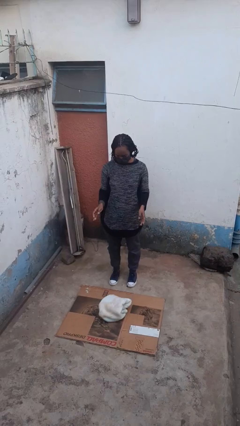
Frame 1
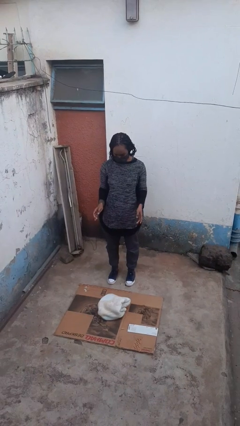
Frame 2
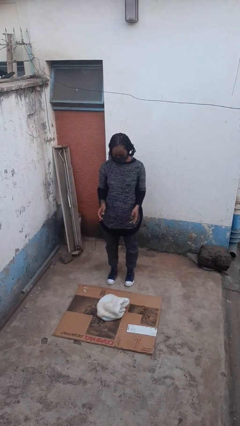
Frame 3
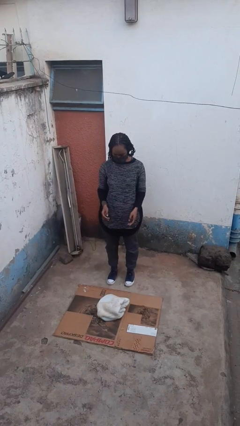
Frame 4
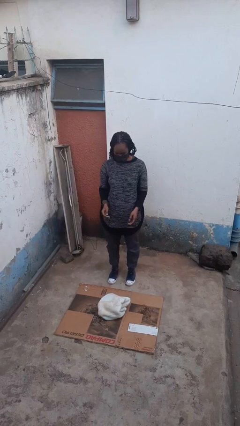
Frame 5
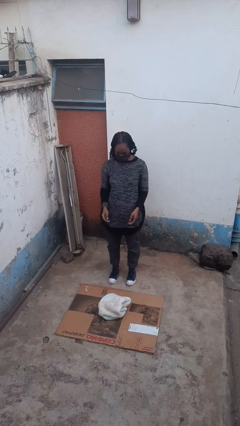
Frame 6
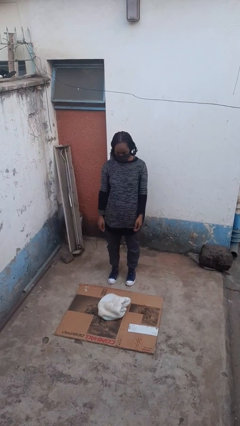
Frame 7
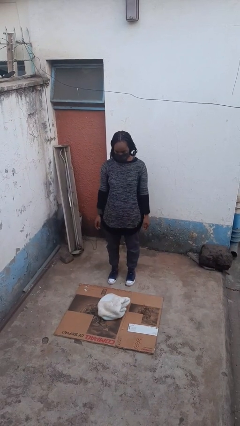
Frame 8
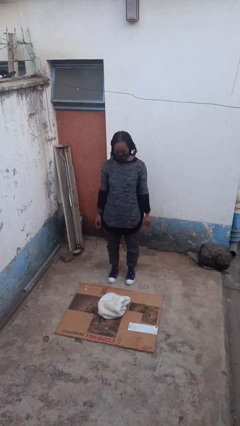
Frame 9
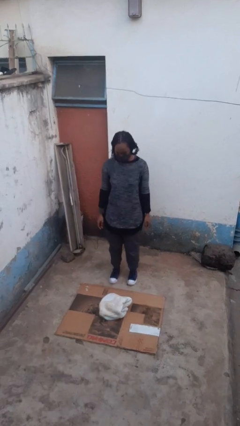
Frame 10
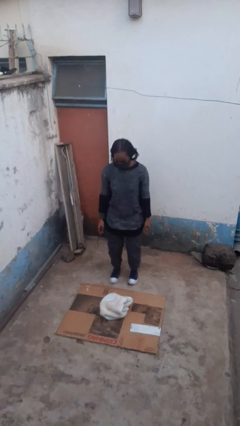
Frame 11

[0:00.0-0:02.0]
person drops object

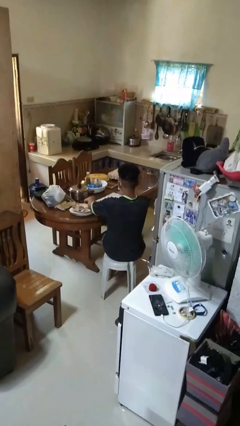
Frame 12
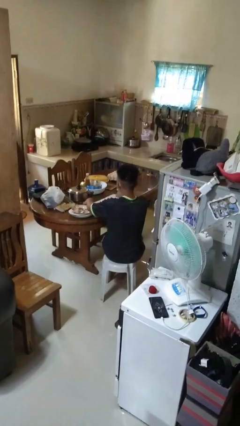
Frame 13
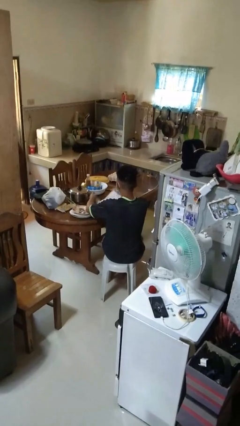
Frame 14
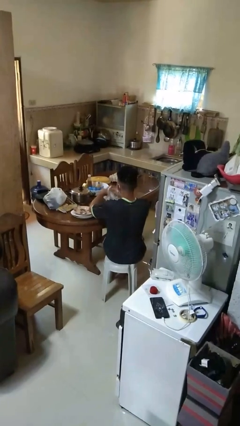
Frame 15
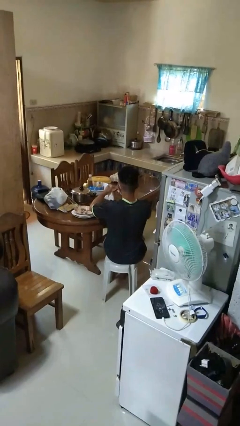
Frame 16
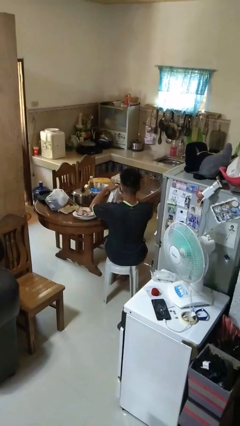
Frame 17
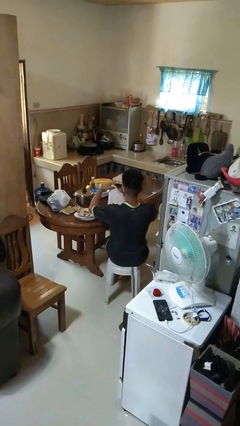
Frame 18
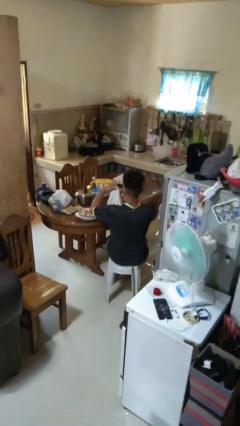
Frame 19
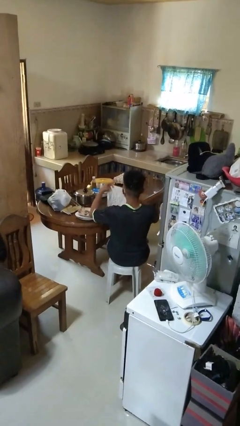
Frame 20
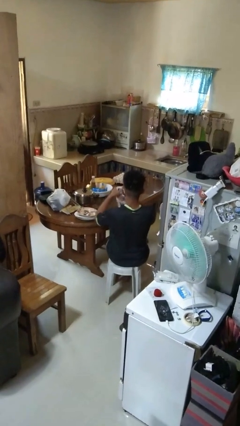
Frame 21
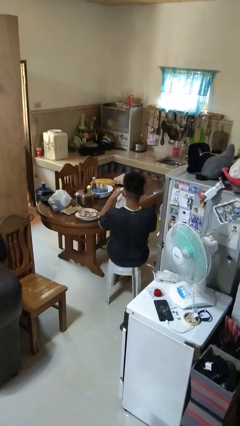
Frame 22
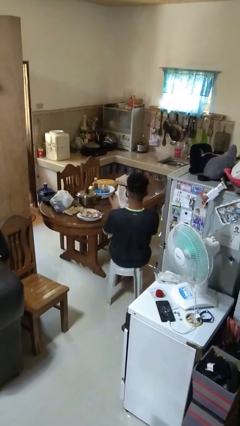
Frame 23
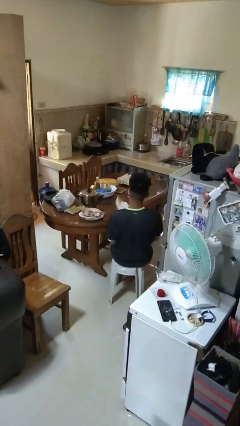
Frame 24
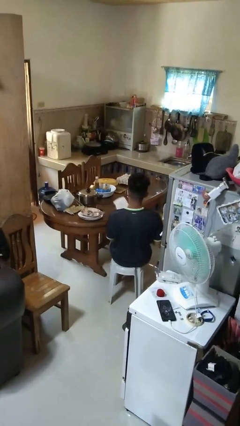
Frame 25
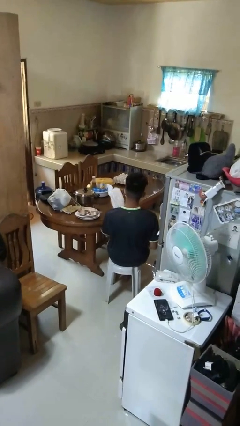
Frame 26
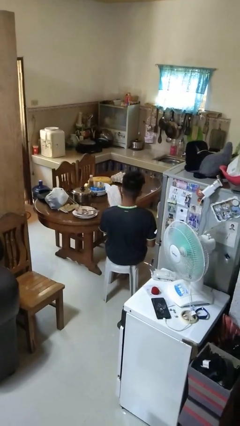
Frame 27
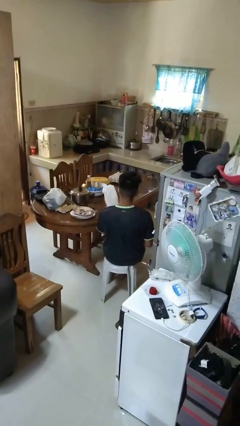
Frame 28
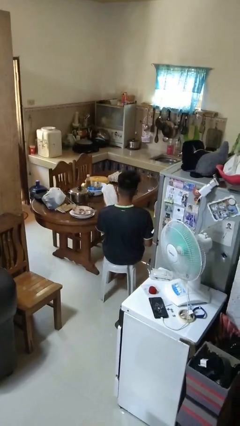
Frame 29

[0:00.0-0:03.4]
person folds tablecloth

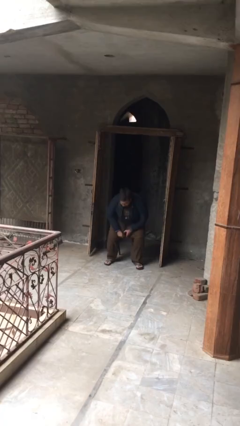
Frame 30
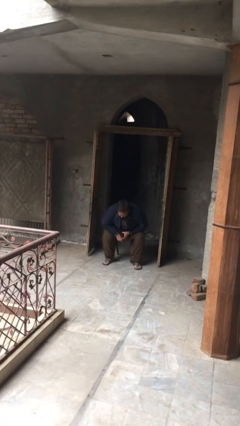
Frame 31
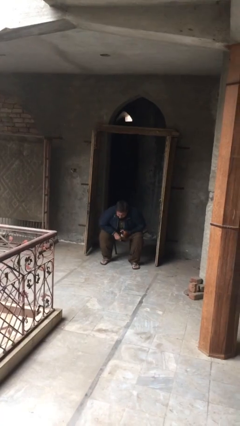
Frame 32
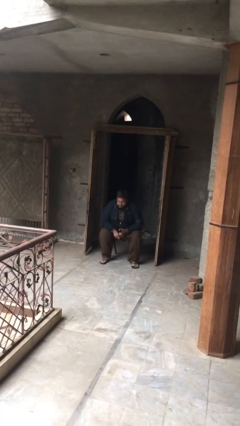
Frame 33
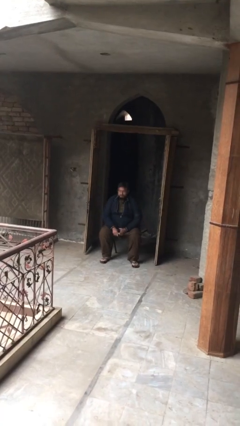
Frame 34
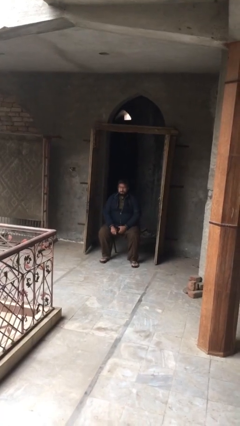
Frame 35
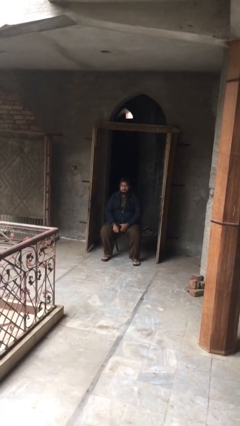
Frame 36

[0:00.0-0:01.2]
person sits down

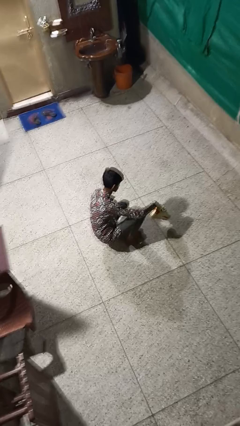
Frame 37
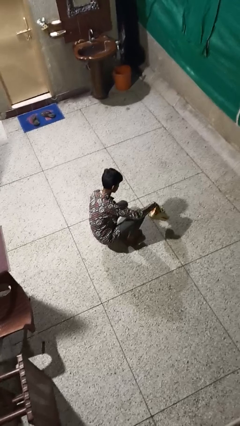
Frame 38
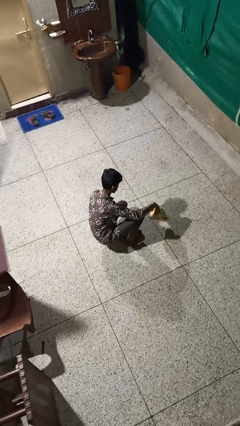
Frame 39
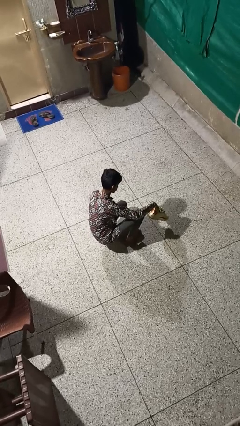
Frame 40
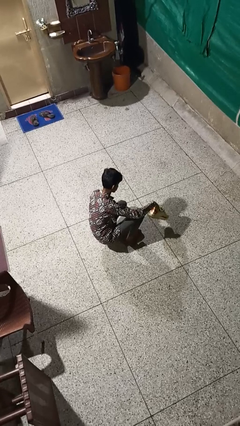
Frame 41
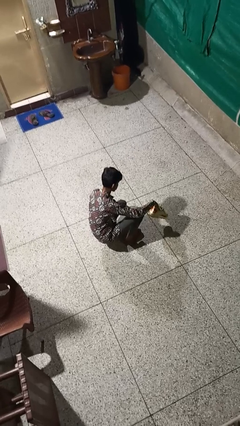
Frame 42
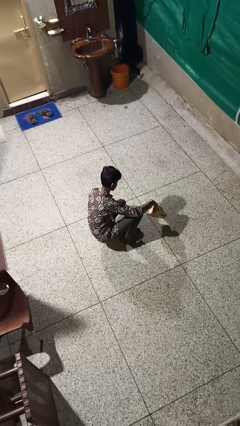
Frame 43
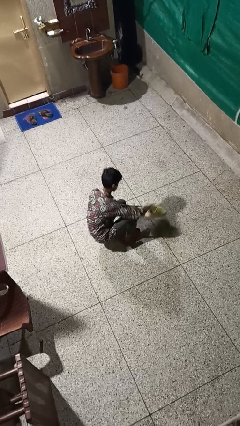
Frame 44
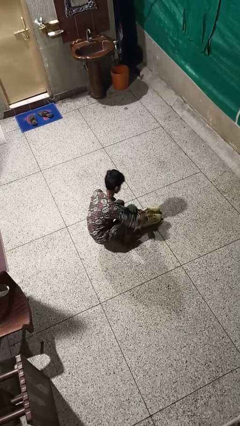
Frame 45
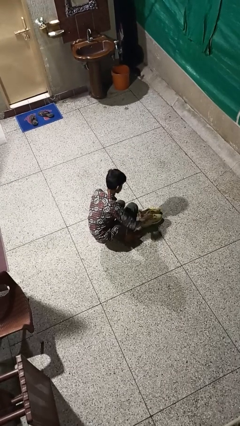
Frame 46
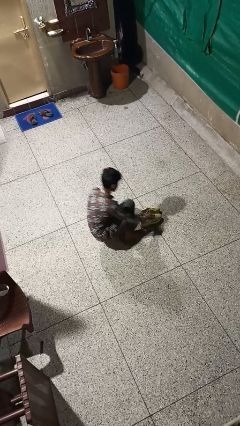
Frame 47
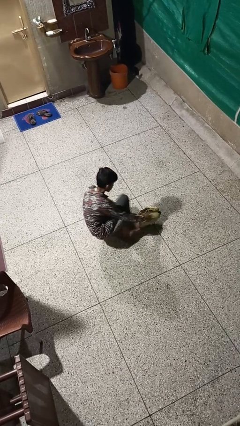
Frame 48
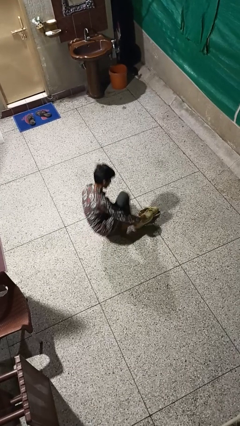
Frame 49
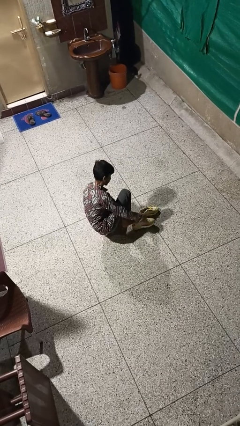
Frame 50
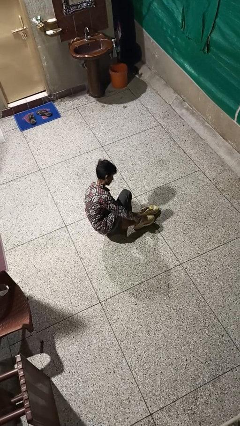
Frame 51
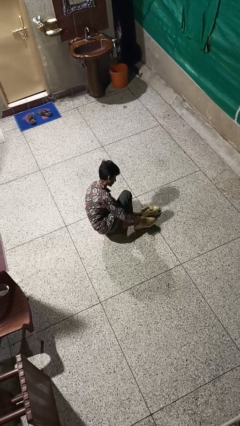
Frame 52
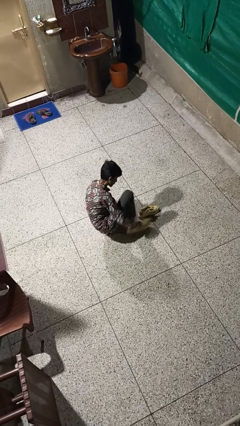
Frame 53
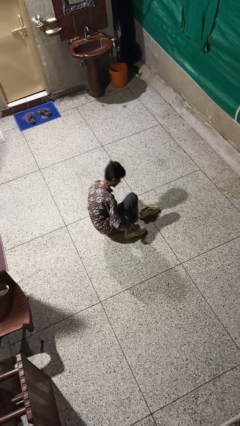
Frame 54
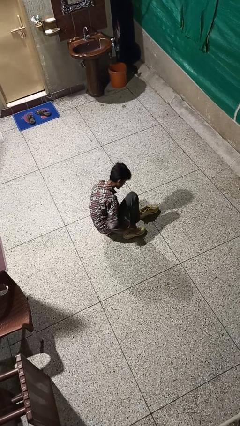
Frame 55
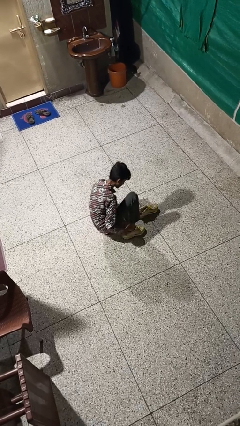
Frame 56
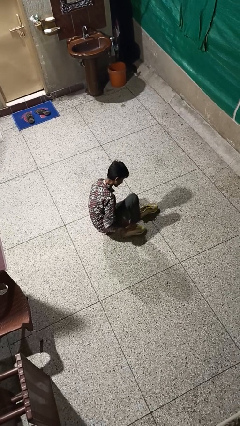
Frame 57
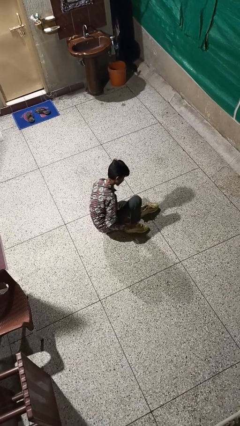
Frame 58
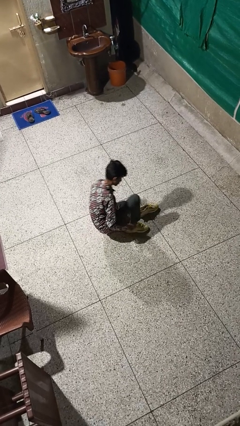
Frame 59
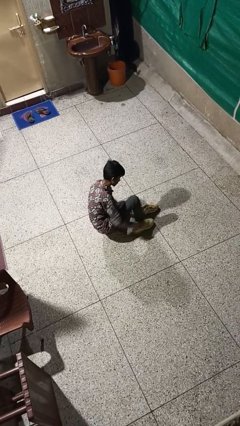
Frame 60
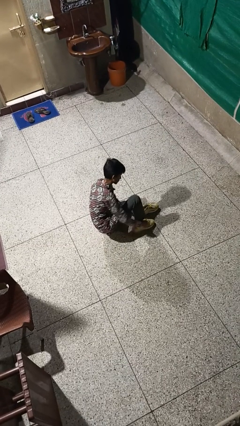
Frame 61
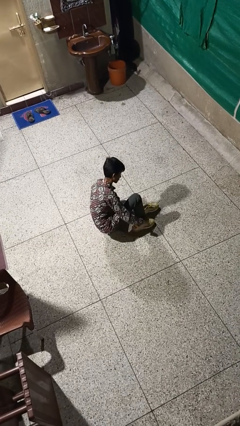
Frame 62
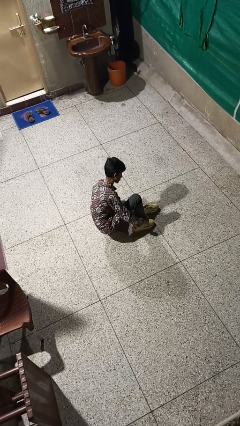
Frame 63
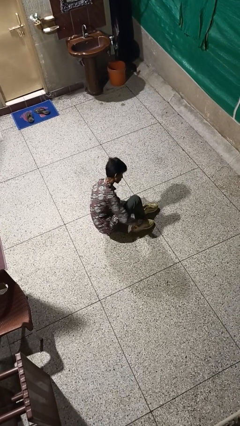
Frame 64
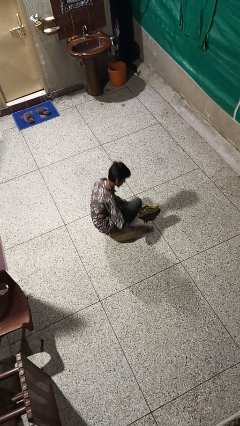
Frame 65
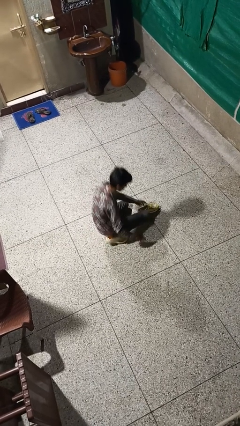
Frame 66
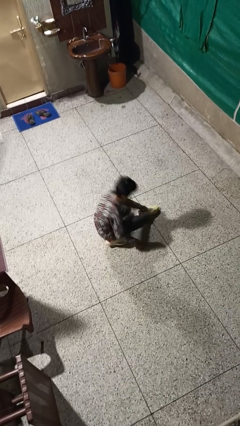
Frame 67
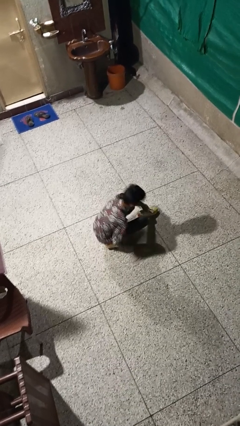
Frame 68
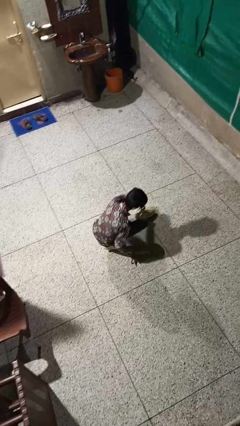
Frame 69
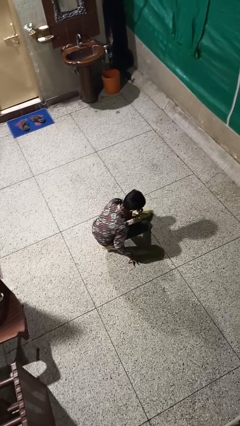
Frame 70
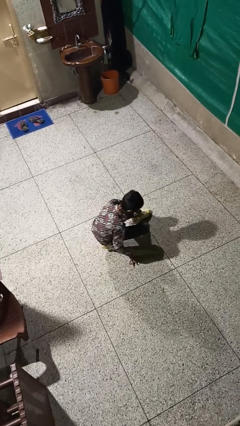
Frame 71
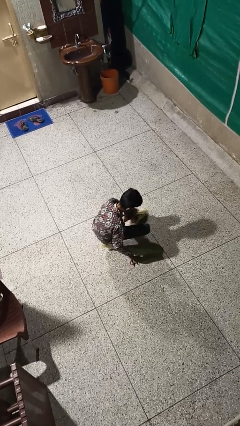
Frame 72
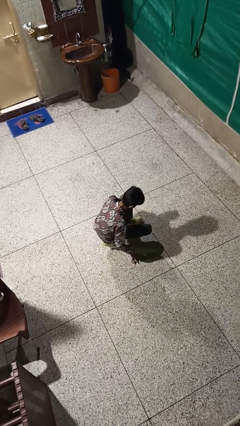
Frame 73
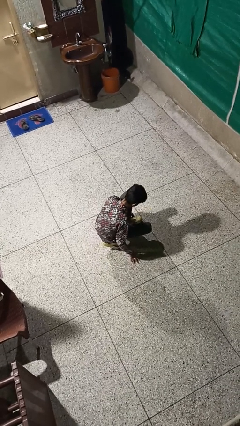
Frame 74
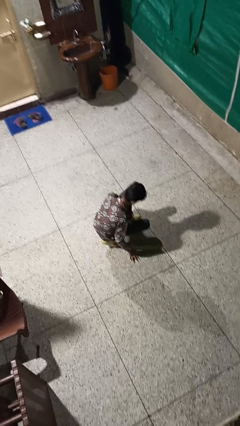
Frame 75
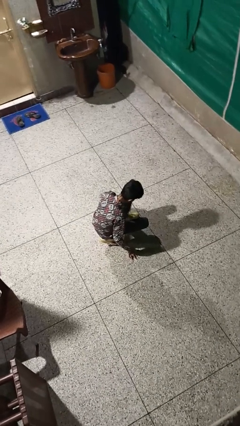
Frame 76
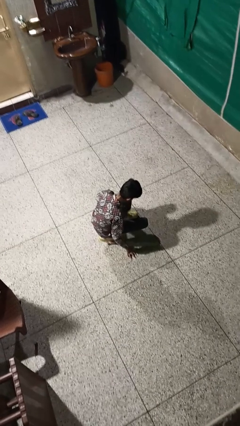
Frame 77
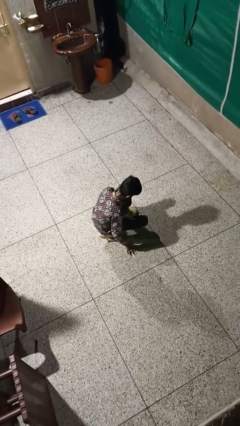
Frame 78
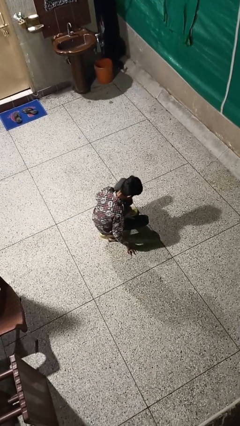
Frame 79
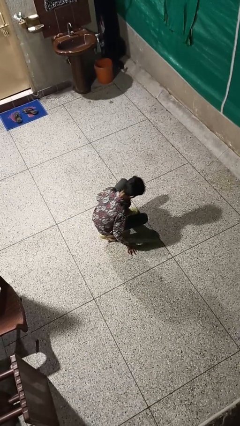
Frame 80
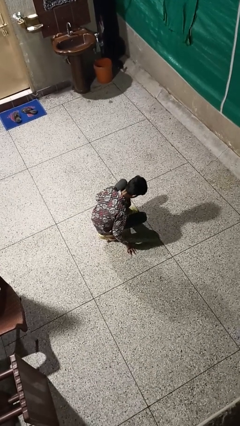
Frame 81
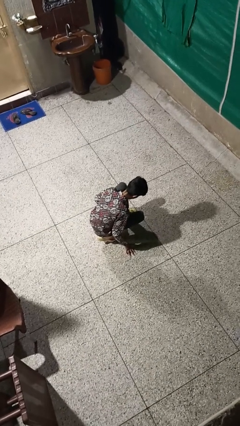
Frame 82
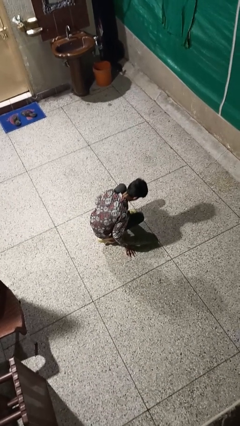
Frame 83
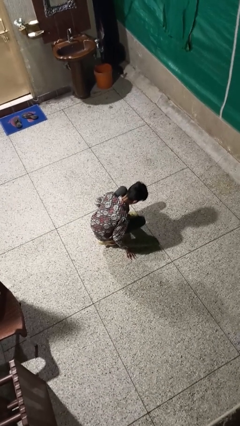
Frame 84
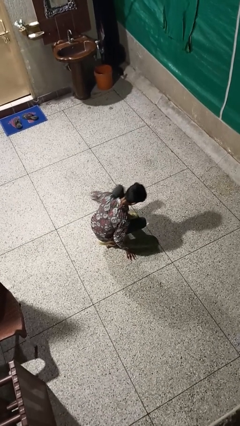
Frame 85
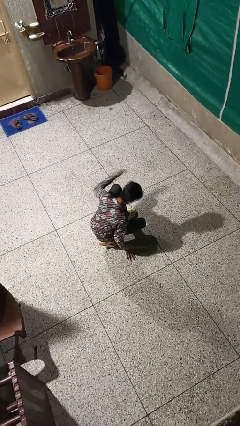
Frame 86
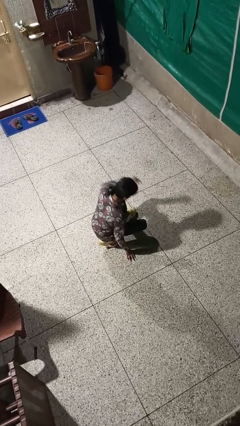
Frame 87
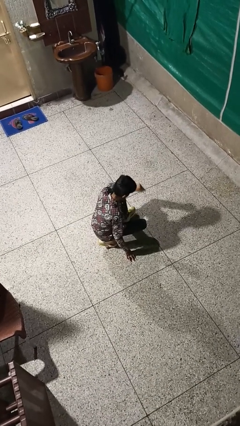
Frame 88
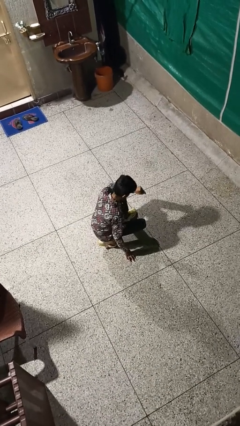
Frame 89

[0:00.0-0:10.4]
person puts on shoes

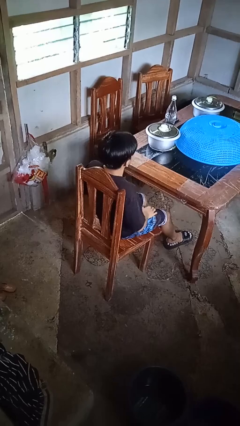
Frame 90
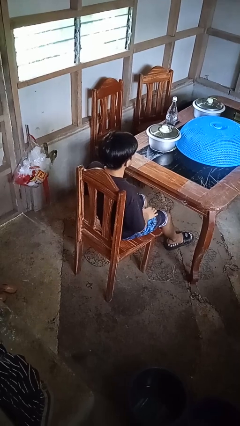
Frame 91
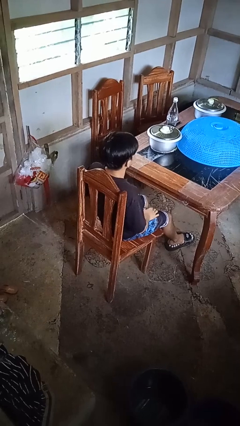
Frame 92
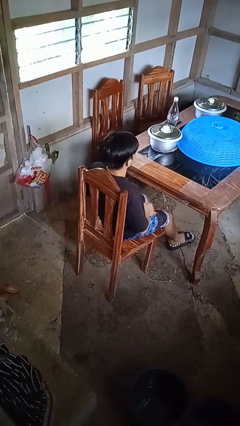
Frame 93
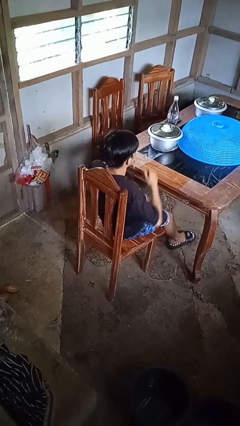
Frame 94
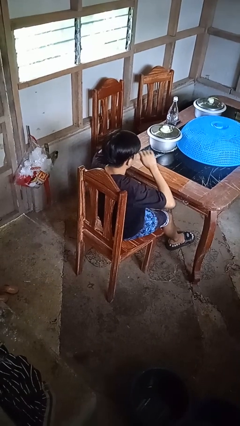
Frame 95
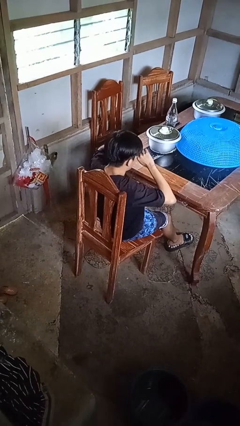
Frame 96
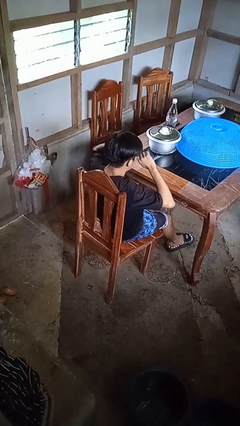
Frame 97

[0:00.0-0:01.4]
person rubs eyes
